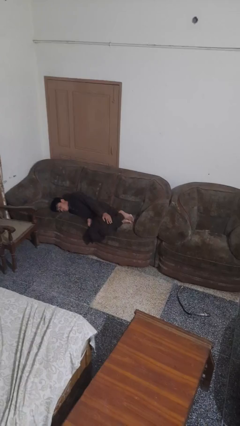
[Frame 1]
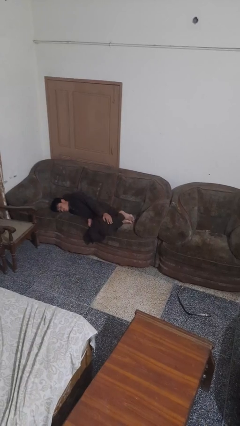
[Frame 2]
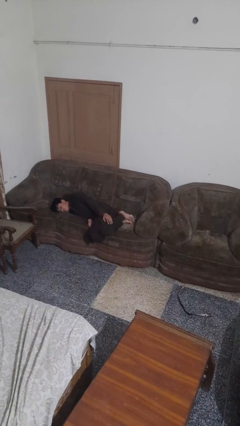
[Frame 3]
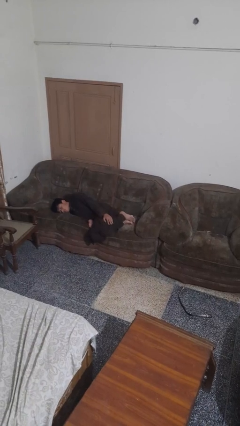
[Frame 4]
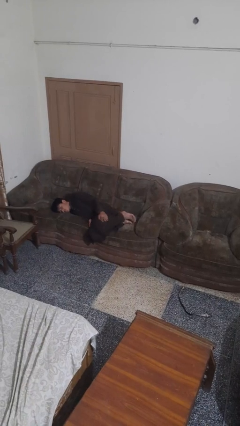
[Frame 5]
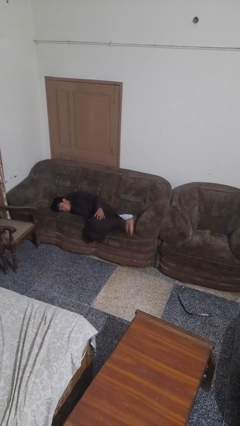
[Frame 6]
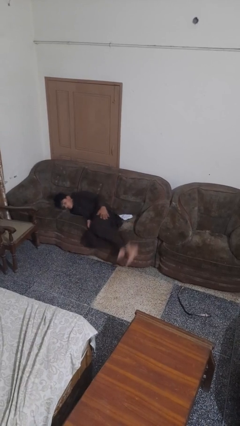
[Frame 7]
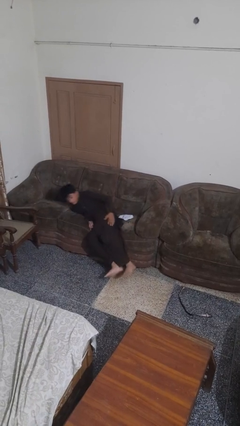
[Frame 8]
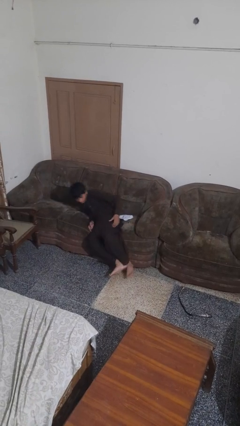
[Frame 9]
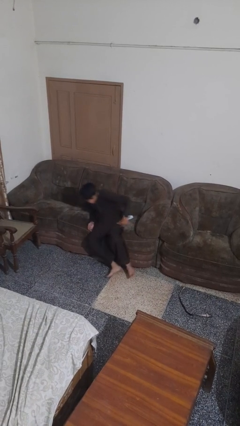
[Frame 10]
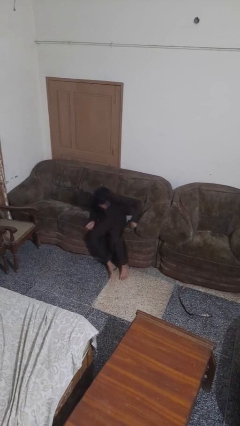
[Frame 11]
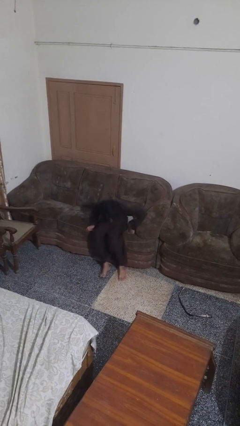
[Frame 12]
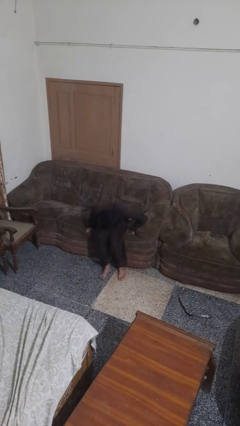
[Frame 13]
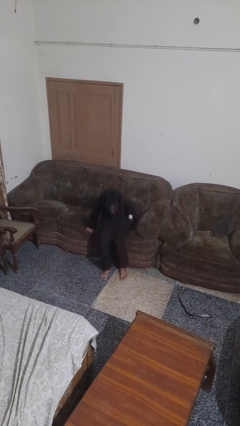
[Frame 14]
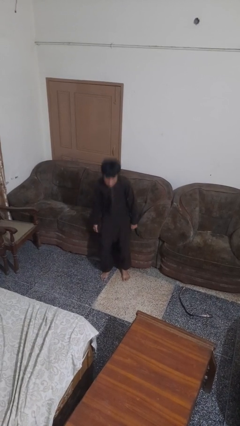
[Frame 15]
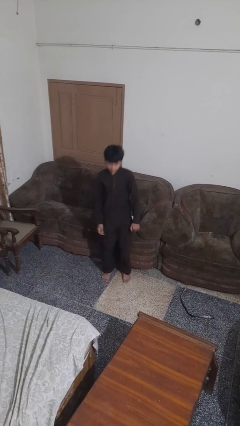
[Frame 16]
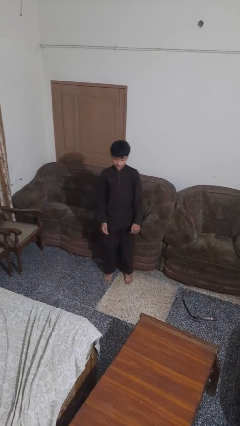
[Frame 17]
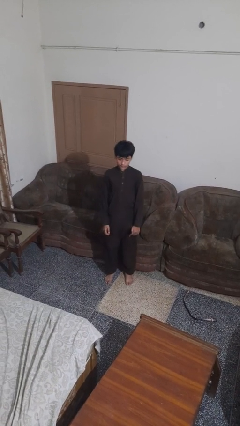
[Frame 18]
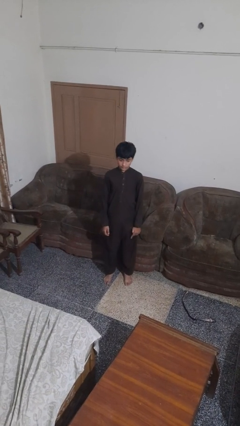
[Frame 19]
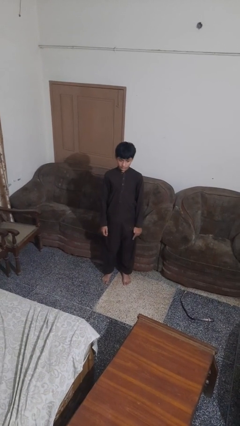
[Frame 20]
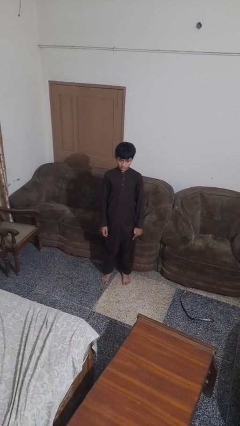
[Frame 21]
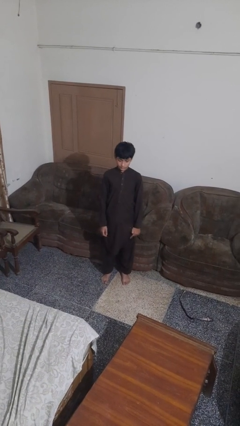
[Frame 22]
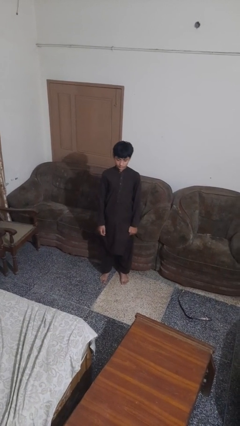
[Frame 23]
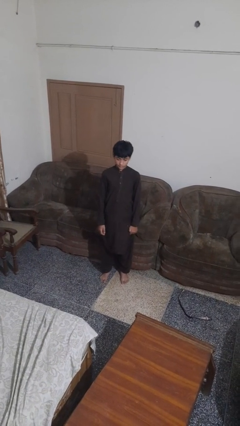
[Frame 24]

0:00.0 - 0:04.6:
person stands up

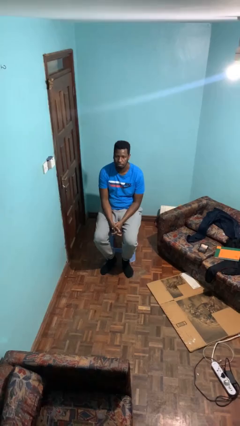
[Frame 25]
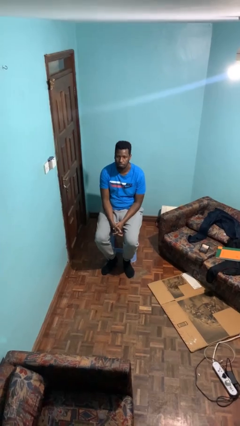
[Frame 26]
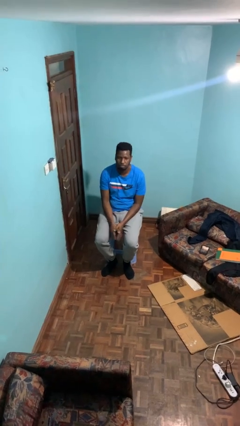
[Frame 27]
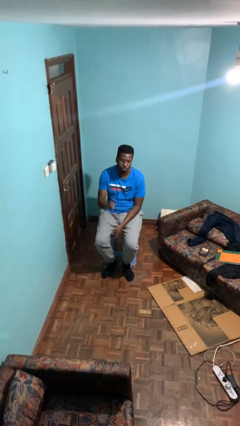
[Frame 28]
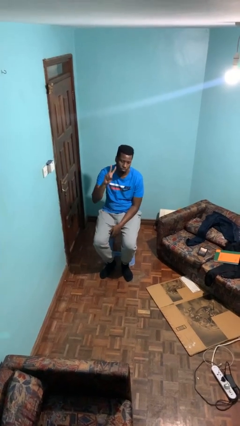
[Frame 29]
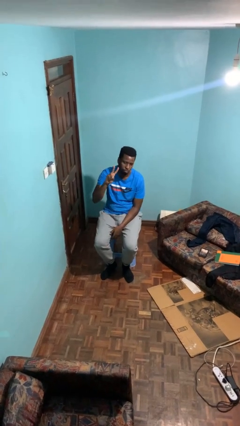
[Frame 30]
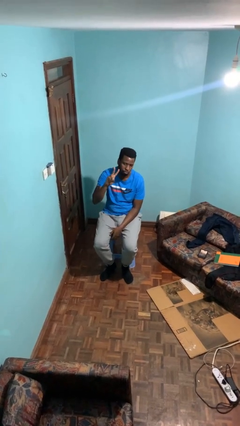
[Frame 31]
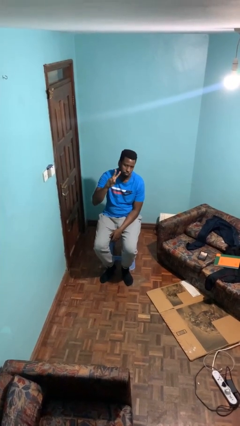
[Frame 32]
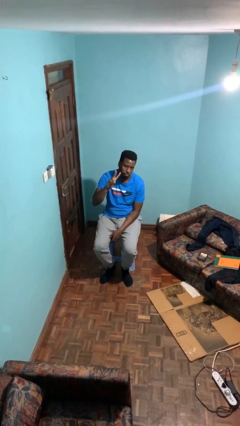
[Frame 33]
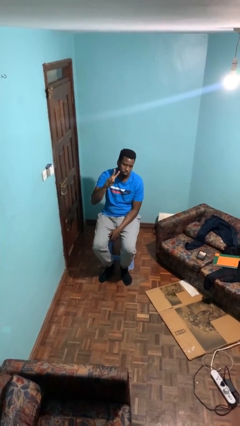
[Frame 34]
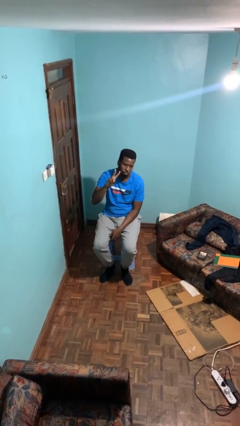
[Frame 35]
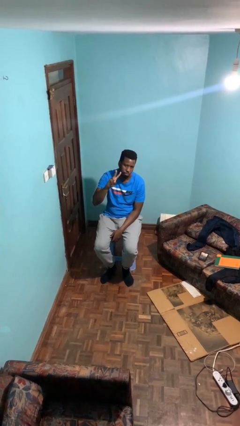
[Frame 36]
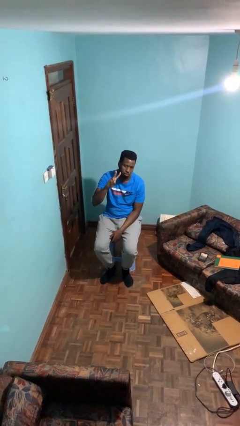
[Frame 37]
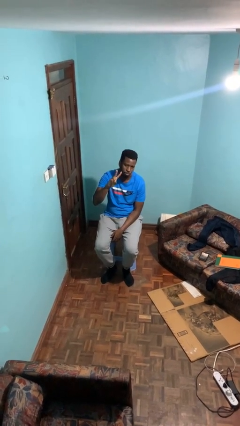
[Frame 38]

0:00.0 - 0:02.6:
person gestures peace

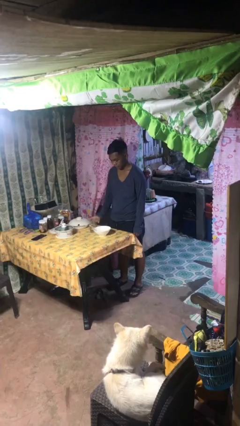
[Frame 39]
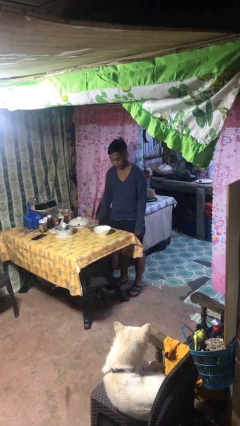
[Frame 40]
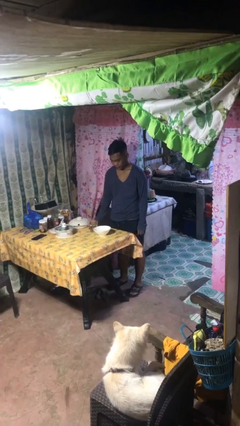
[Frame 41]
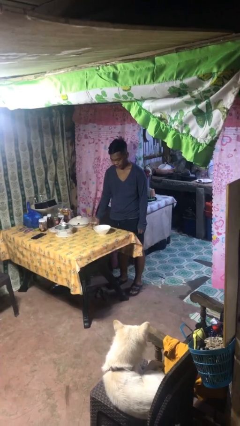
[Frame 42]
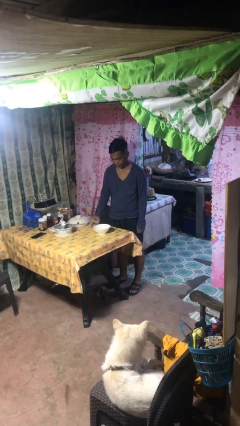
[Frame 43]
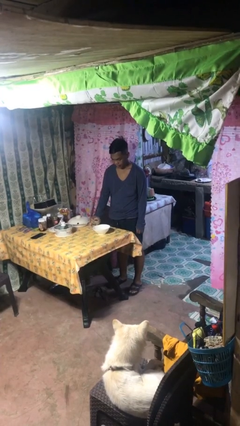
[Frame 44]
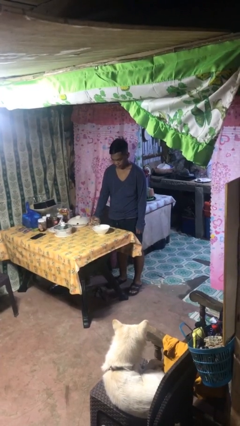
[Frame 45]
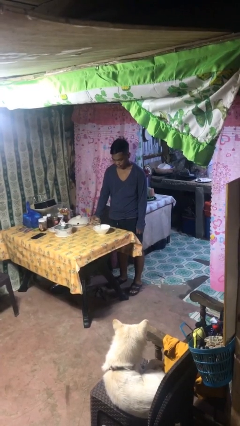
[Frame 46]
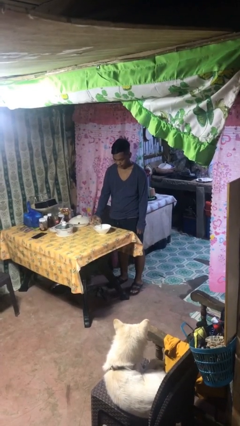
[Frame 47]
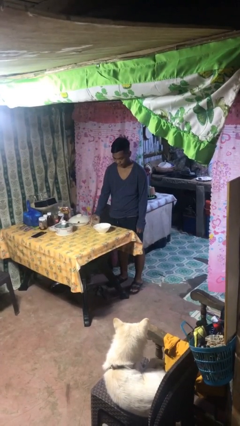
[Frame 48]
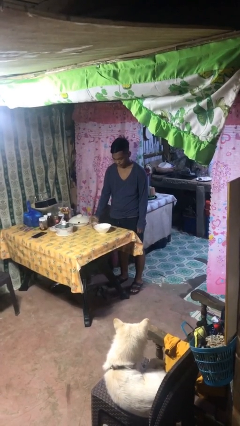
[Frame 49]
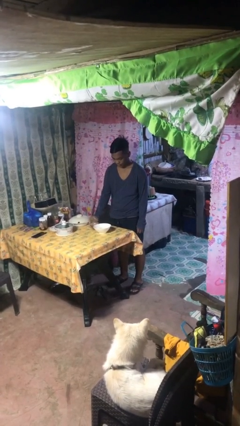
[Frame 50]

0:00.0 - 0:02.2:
person pours into bowl

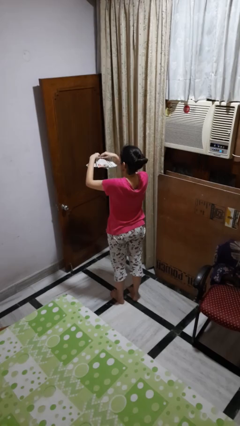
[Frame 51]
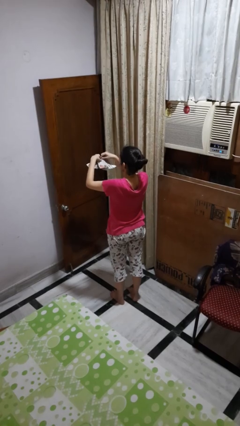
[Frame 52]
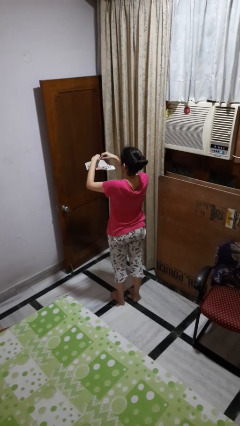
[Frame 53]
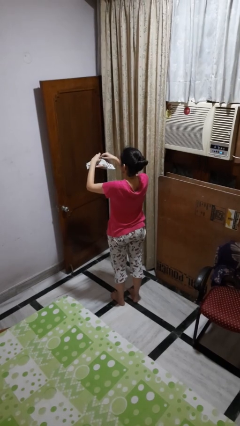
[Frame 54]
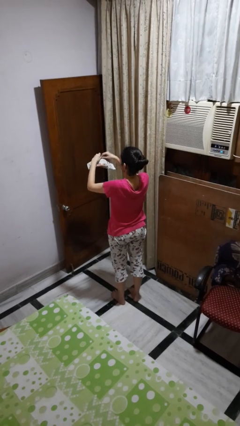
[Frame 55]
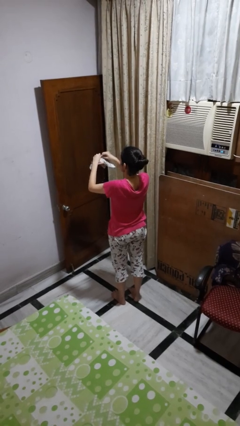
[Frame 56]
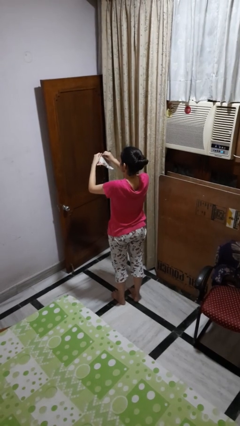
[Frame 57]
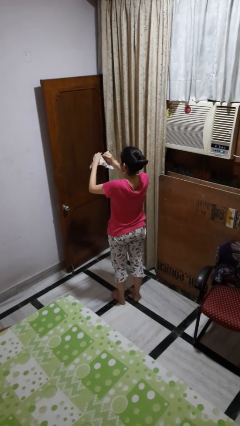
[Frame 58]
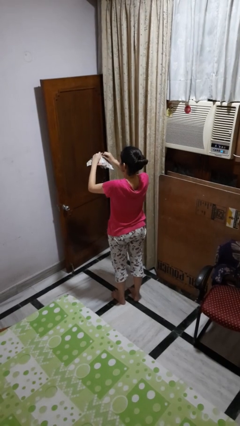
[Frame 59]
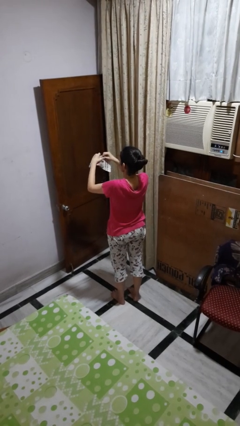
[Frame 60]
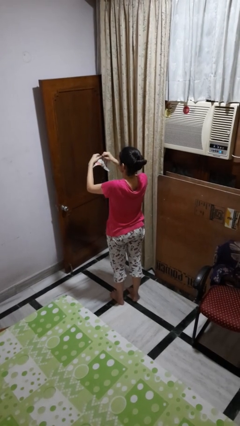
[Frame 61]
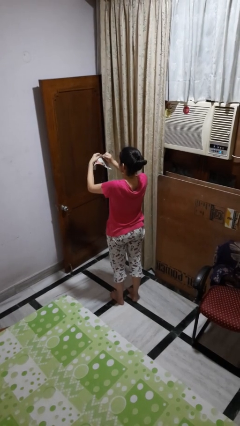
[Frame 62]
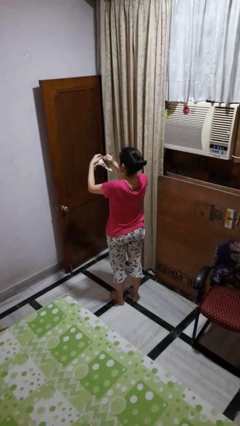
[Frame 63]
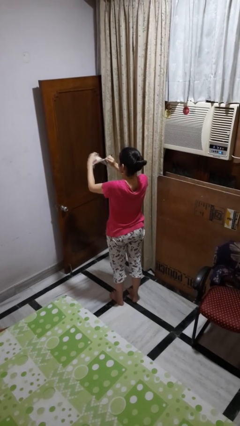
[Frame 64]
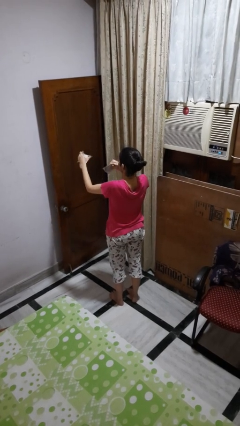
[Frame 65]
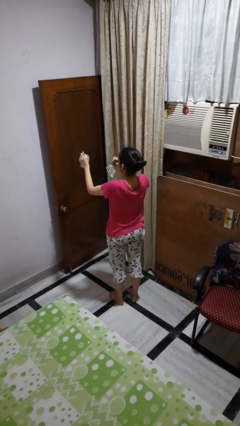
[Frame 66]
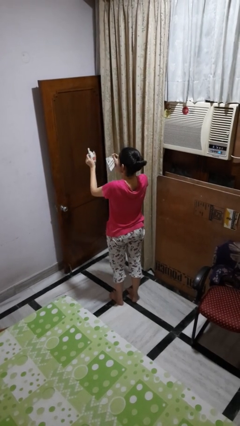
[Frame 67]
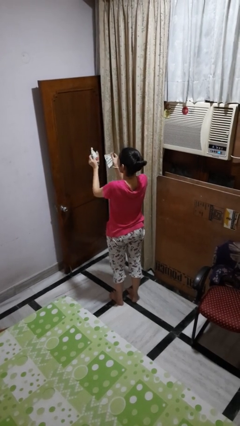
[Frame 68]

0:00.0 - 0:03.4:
person tears paper

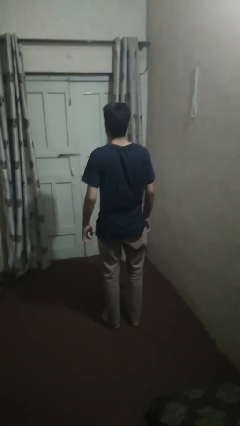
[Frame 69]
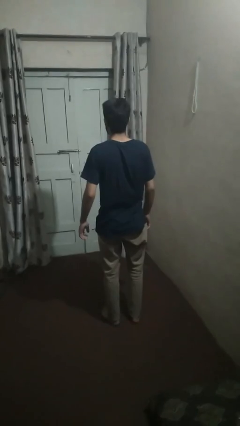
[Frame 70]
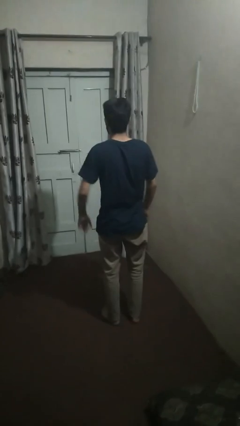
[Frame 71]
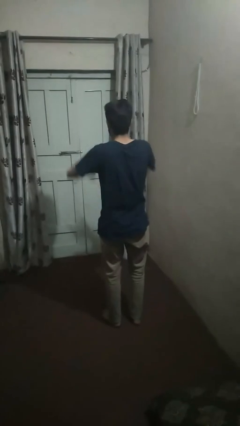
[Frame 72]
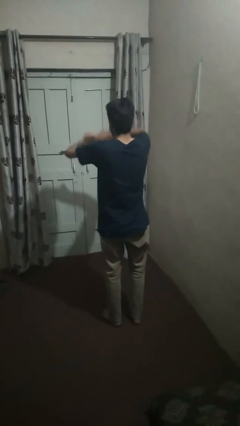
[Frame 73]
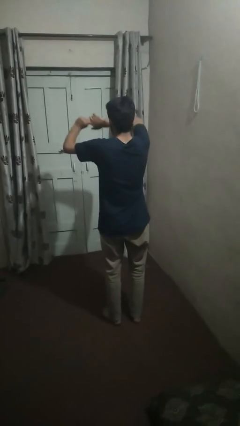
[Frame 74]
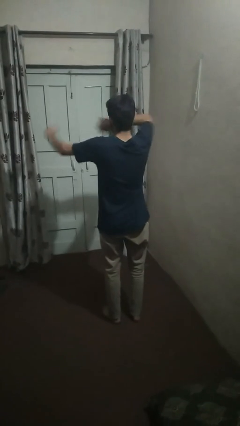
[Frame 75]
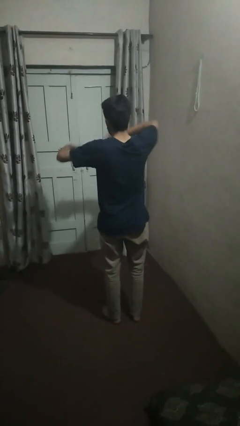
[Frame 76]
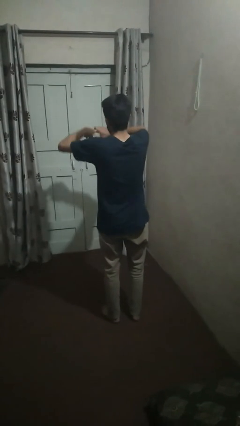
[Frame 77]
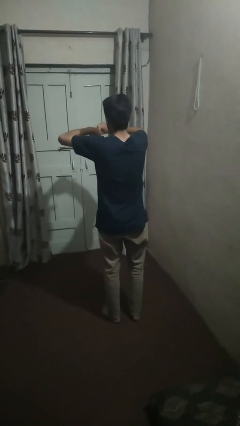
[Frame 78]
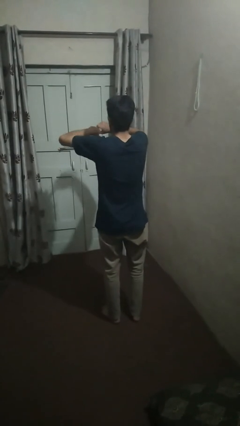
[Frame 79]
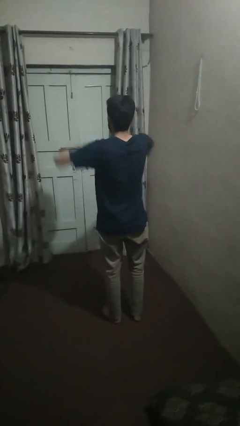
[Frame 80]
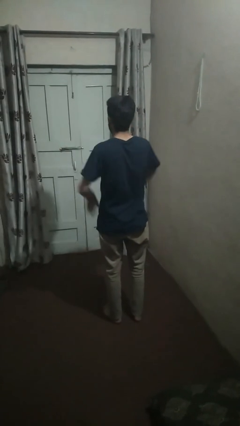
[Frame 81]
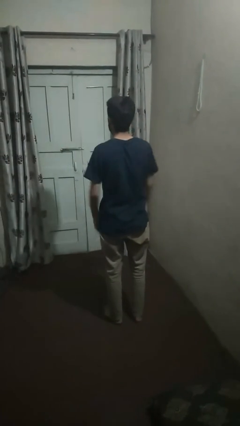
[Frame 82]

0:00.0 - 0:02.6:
person snaps fingers

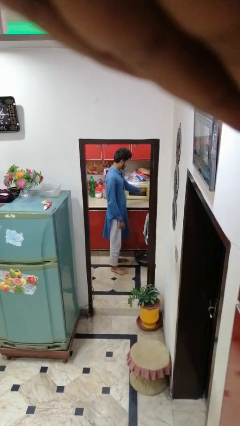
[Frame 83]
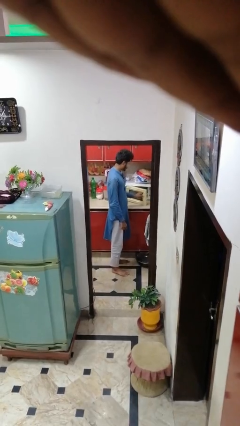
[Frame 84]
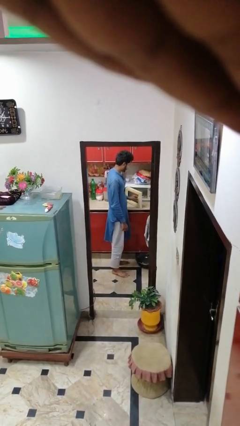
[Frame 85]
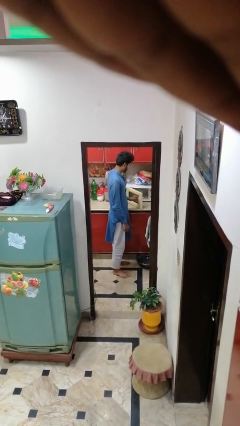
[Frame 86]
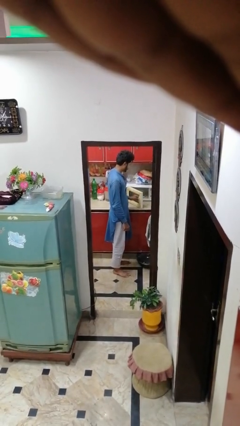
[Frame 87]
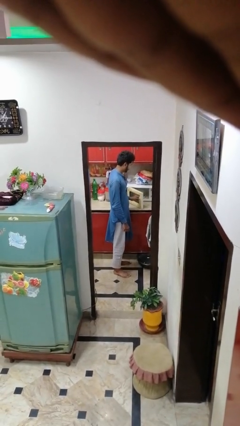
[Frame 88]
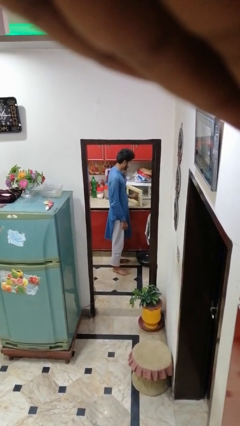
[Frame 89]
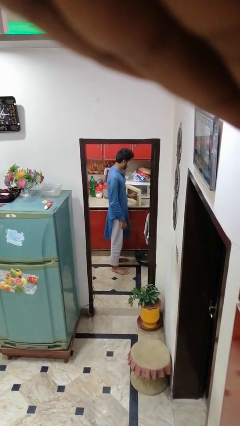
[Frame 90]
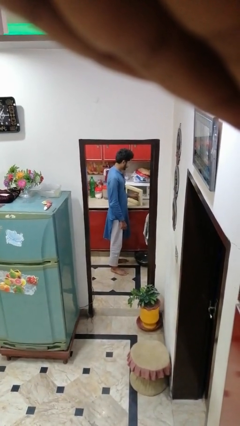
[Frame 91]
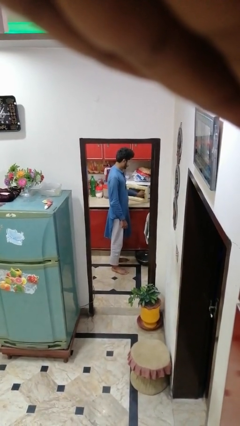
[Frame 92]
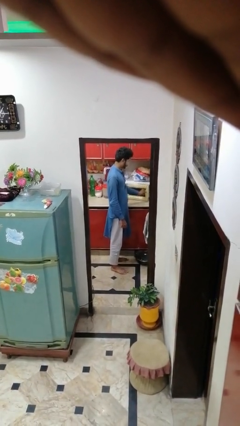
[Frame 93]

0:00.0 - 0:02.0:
person opens microwave
